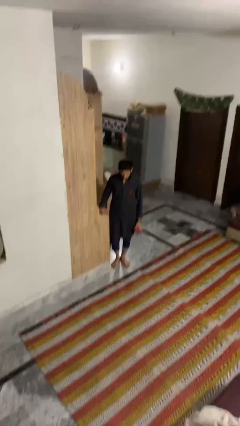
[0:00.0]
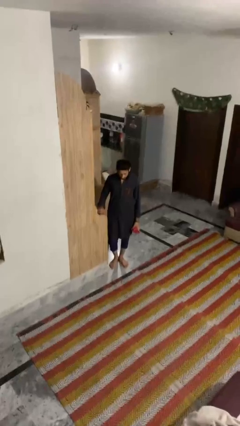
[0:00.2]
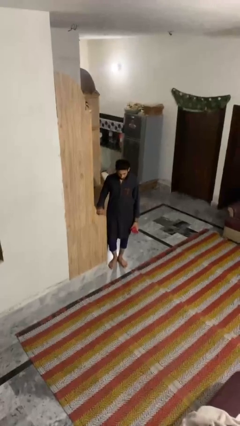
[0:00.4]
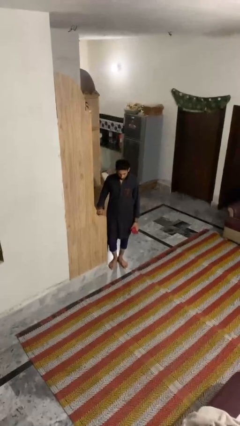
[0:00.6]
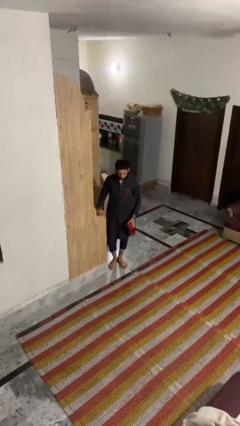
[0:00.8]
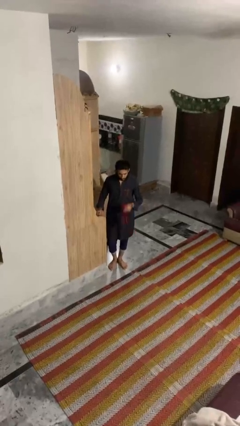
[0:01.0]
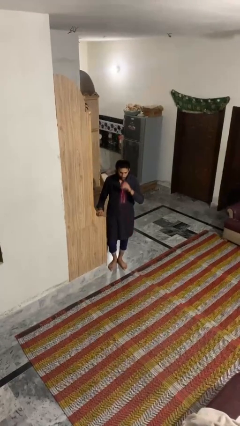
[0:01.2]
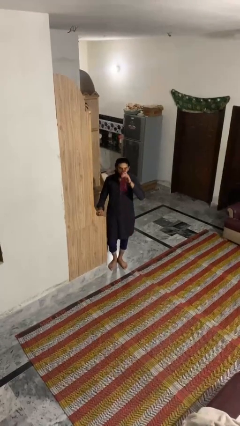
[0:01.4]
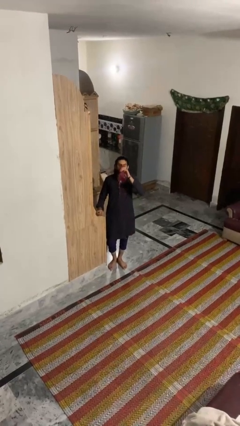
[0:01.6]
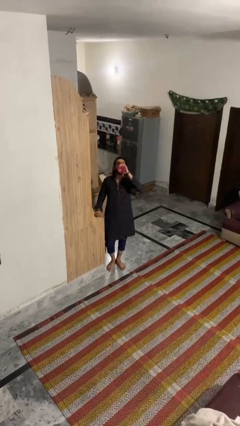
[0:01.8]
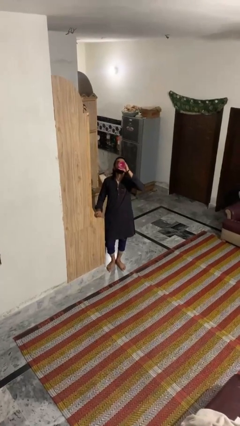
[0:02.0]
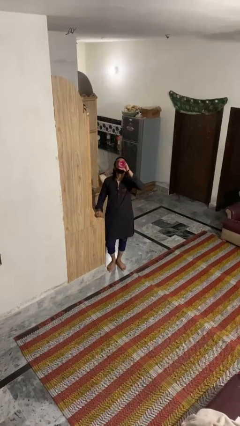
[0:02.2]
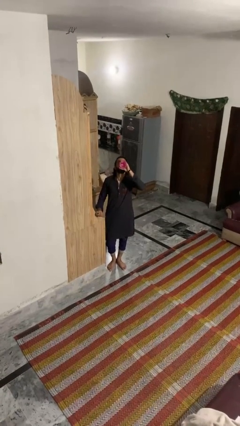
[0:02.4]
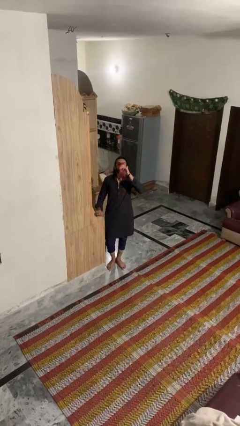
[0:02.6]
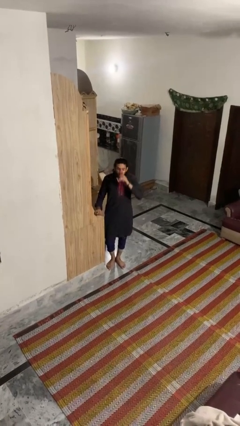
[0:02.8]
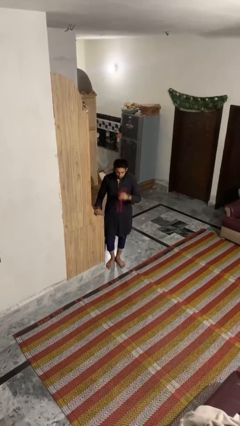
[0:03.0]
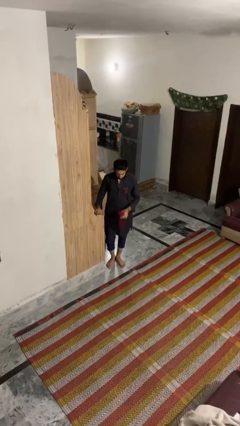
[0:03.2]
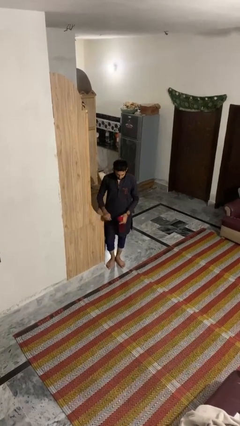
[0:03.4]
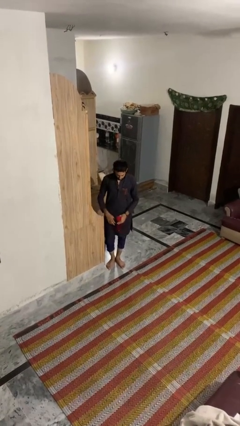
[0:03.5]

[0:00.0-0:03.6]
person drinks from bottle

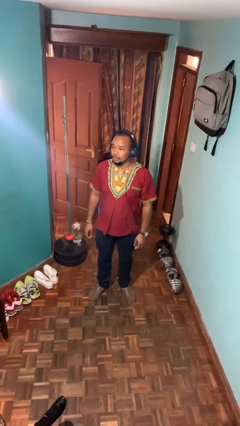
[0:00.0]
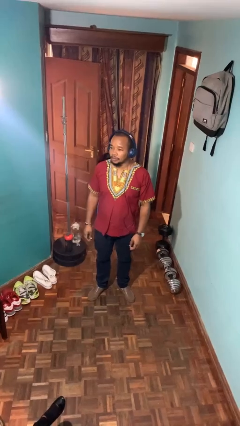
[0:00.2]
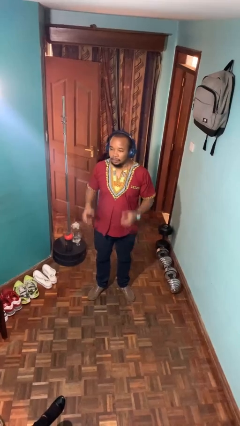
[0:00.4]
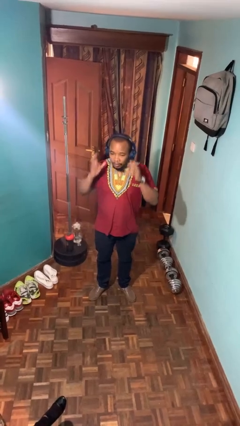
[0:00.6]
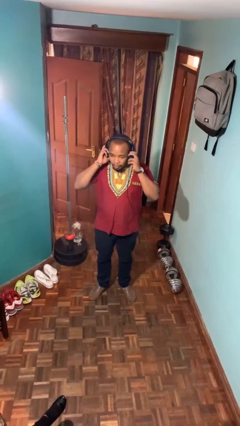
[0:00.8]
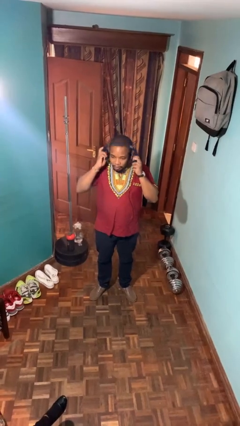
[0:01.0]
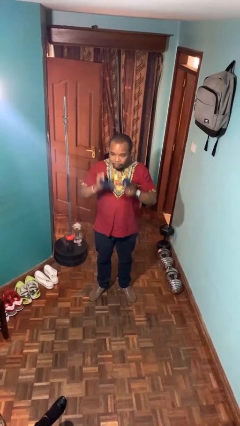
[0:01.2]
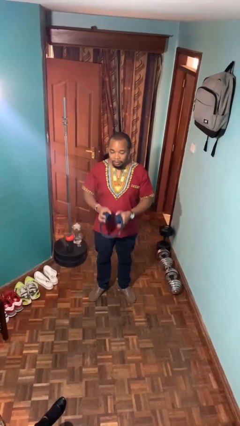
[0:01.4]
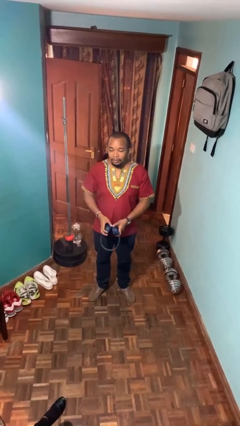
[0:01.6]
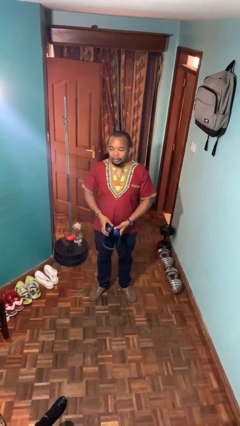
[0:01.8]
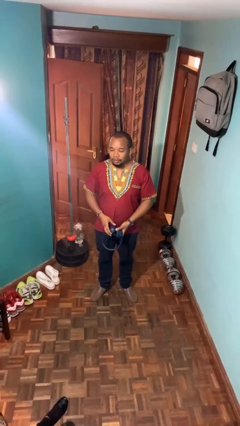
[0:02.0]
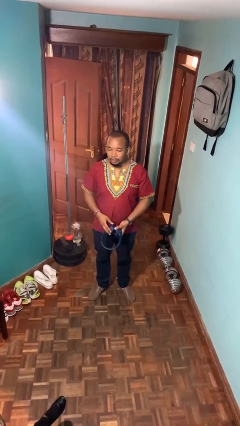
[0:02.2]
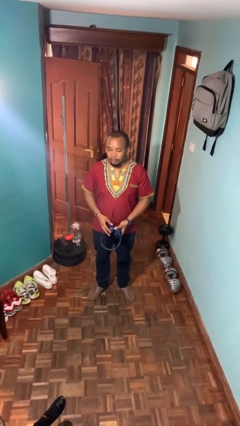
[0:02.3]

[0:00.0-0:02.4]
person takes off headphones

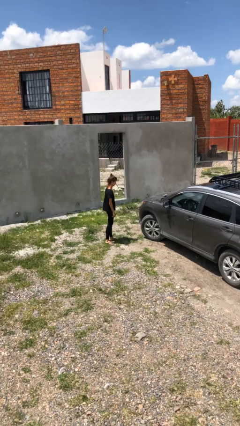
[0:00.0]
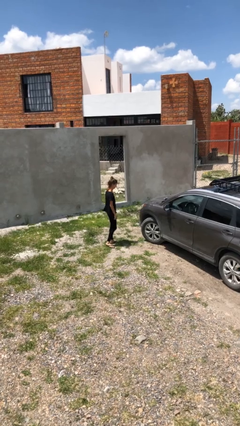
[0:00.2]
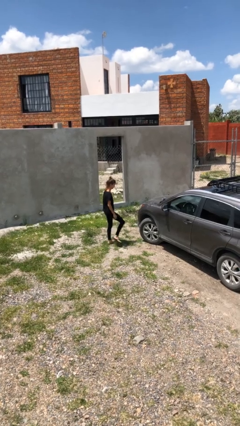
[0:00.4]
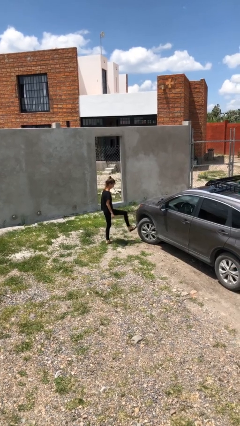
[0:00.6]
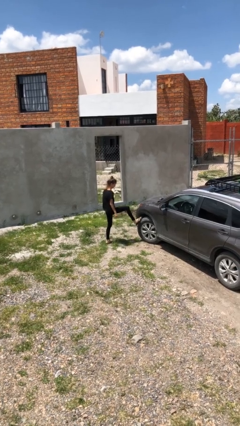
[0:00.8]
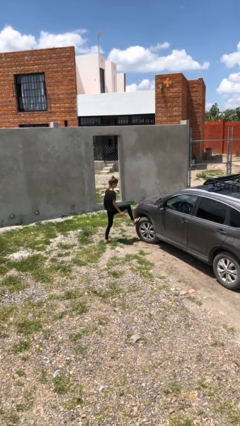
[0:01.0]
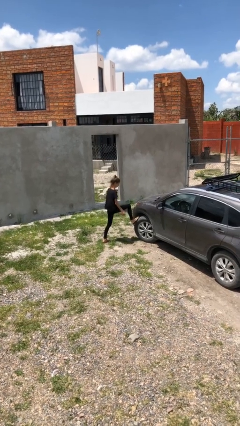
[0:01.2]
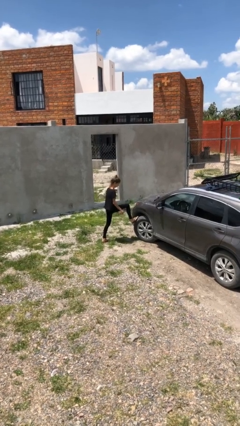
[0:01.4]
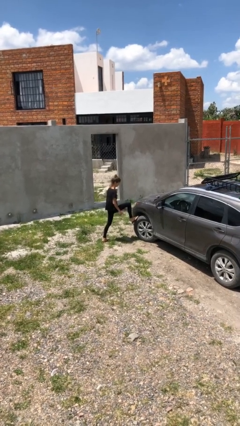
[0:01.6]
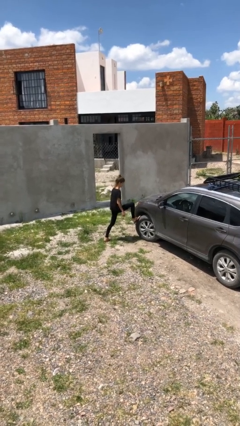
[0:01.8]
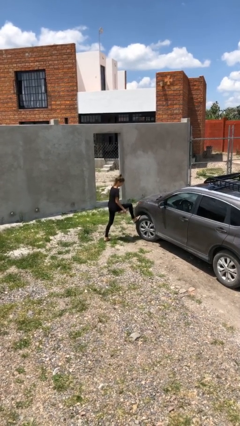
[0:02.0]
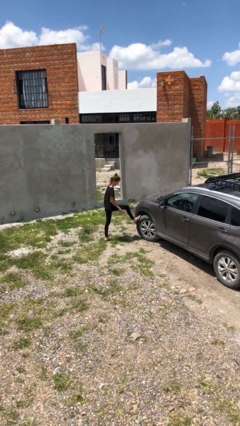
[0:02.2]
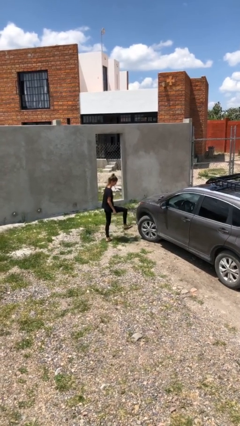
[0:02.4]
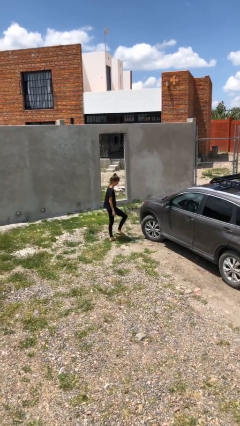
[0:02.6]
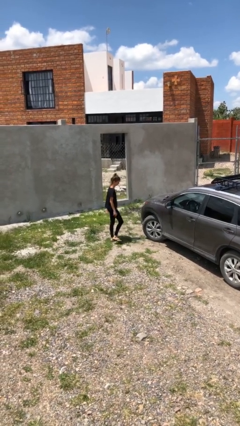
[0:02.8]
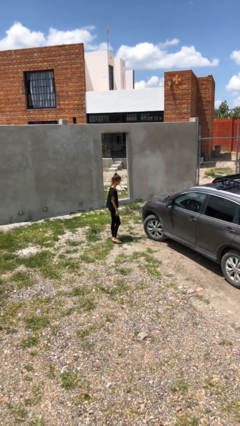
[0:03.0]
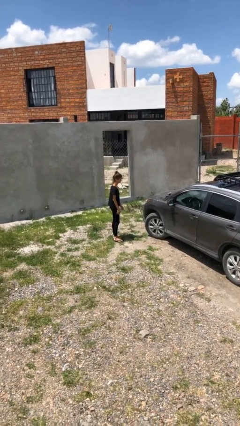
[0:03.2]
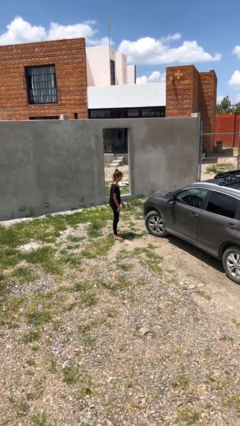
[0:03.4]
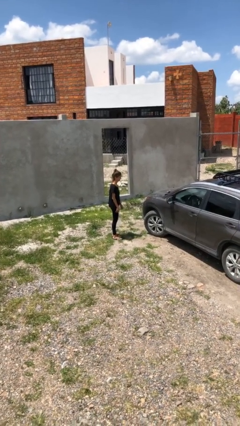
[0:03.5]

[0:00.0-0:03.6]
person kicks car tires

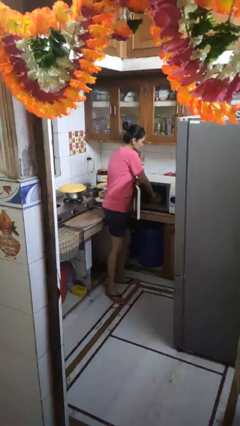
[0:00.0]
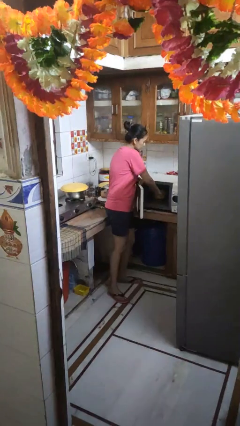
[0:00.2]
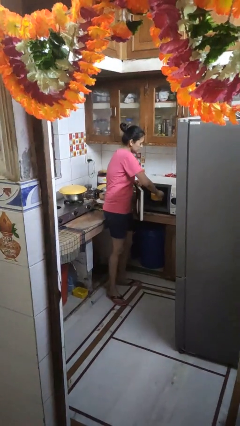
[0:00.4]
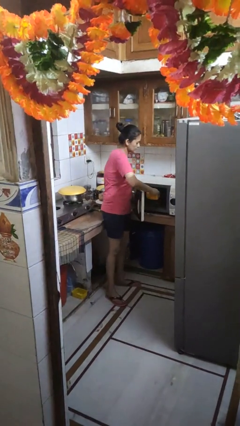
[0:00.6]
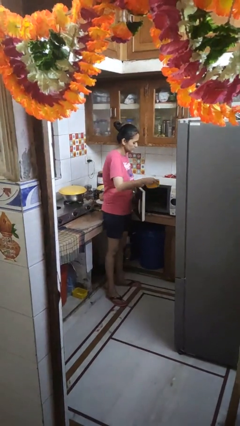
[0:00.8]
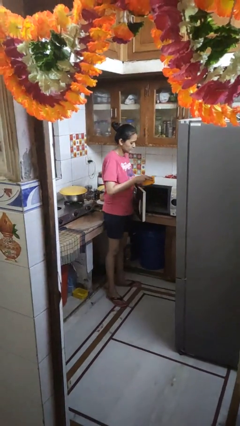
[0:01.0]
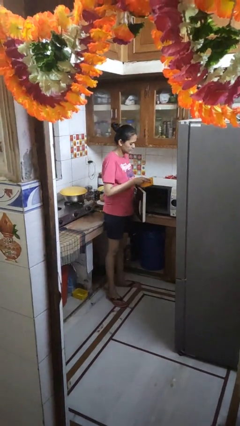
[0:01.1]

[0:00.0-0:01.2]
person takes object from microwave

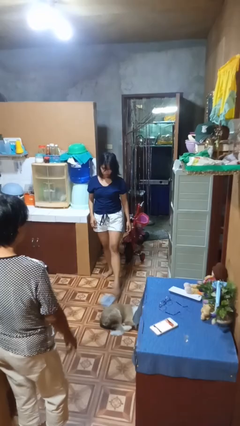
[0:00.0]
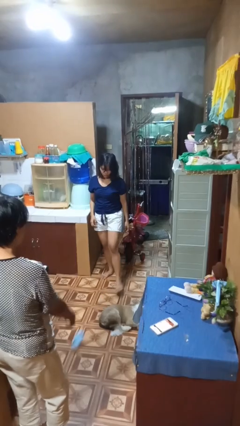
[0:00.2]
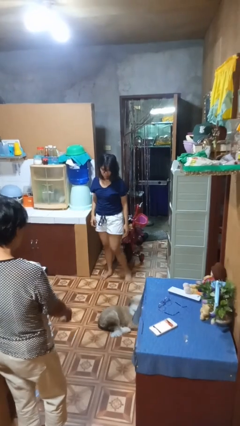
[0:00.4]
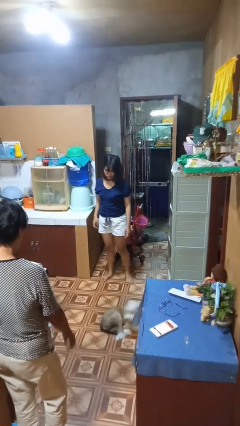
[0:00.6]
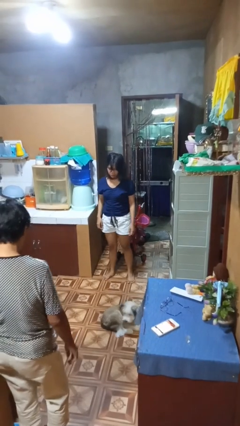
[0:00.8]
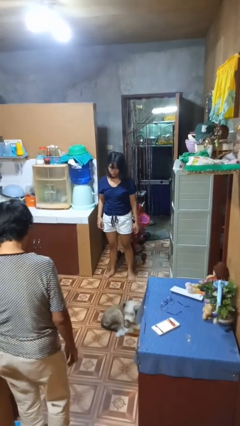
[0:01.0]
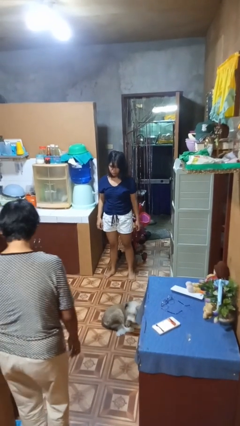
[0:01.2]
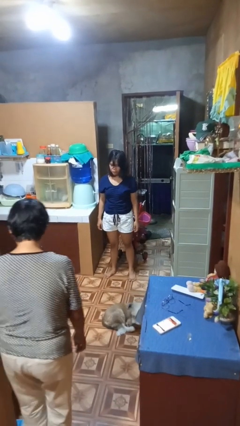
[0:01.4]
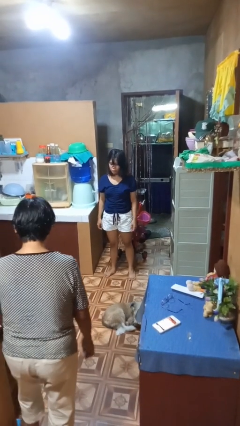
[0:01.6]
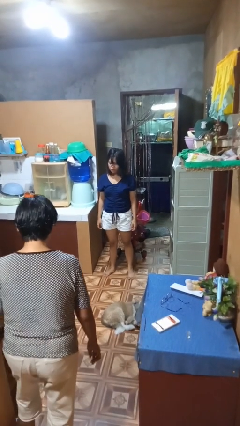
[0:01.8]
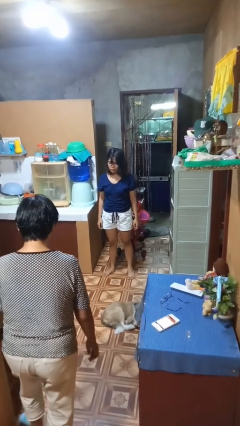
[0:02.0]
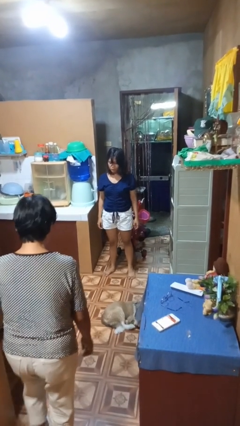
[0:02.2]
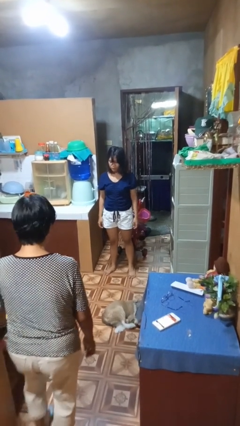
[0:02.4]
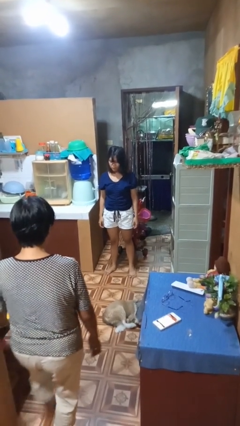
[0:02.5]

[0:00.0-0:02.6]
person kicks object to person

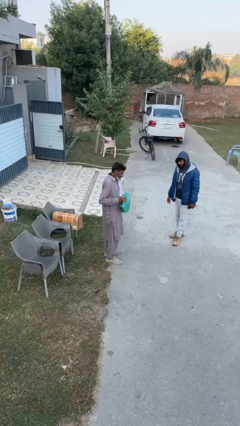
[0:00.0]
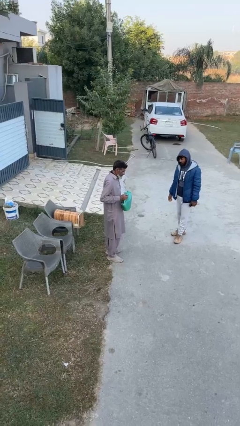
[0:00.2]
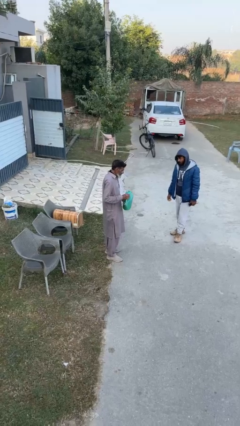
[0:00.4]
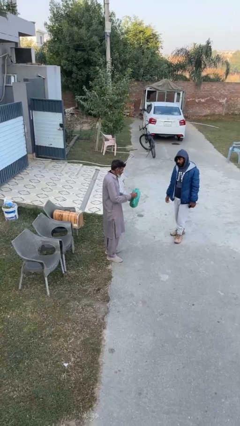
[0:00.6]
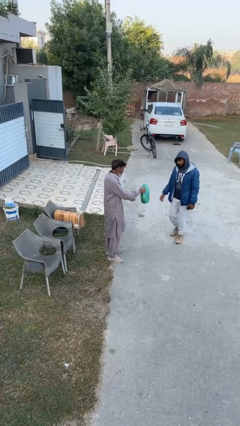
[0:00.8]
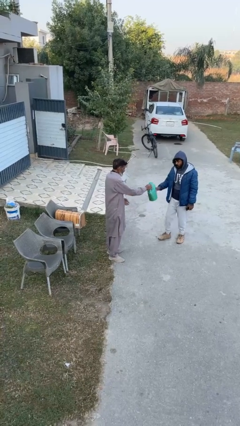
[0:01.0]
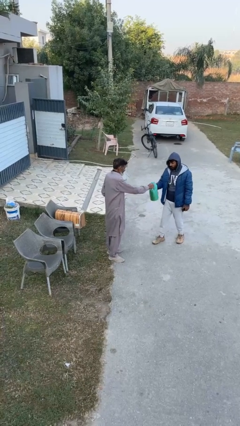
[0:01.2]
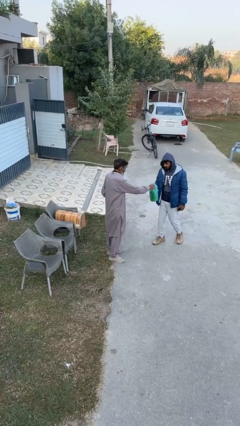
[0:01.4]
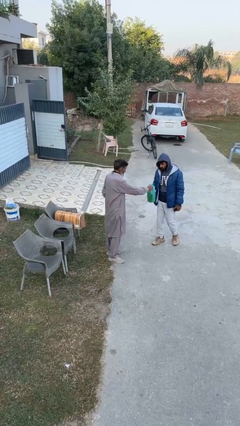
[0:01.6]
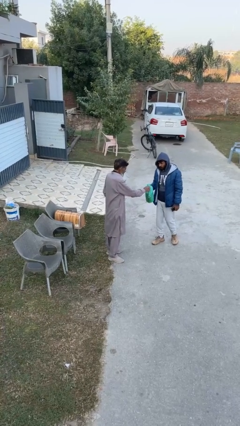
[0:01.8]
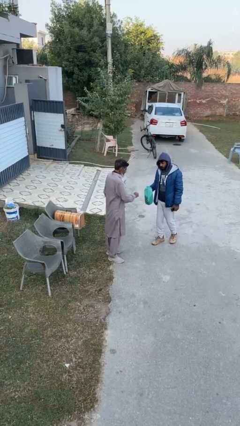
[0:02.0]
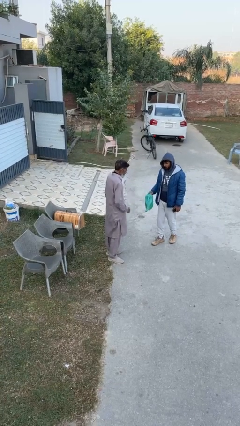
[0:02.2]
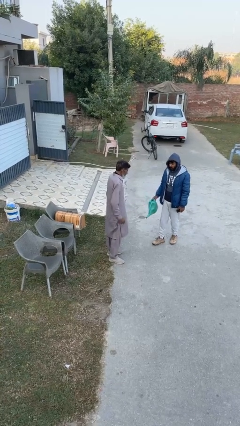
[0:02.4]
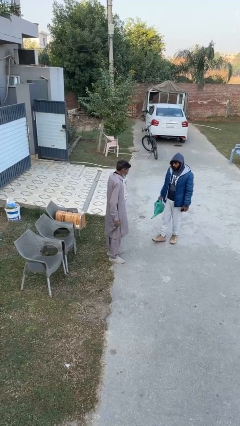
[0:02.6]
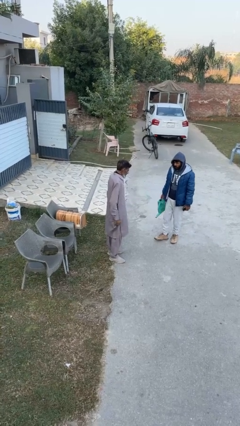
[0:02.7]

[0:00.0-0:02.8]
person transfers object to person

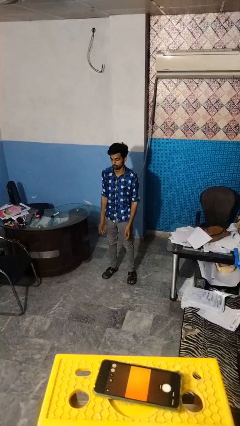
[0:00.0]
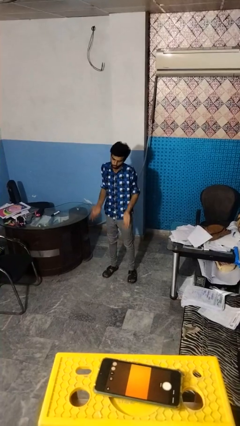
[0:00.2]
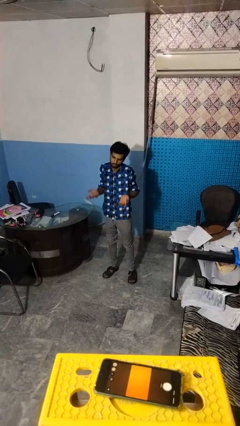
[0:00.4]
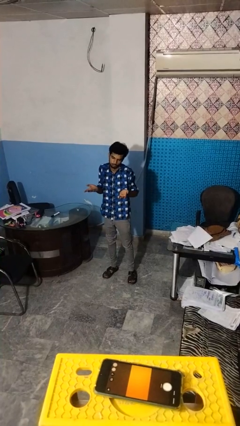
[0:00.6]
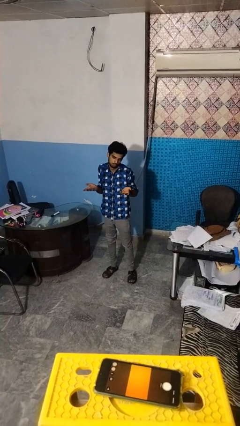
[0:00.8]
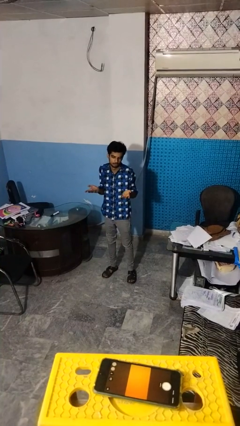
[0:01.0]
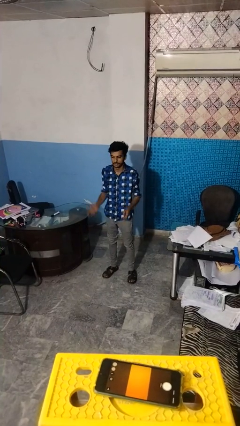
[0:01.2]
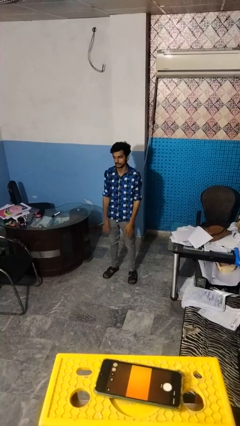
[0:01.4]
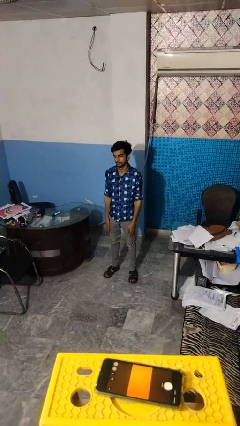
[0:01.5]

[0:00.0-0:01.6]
person shrugs
